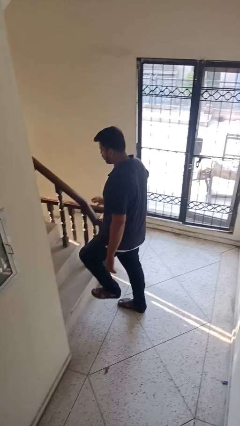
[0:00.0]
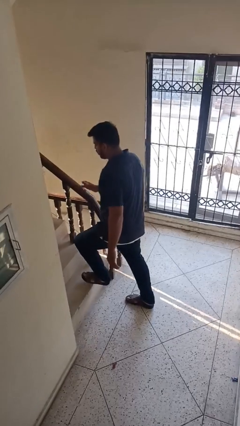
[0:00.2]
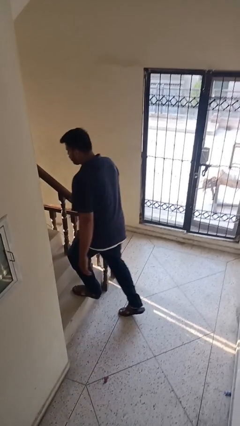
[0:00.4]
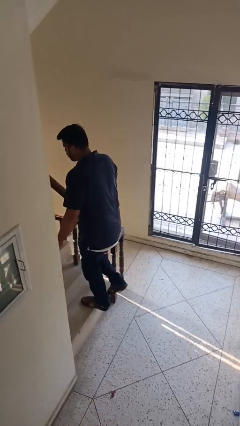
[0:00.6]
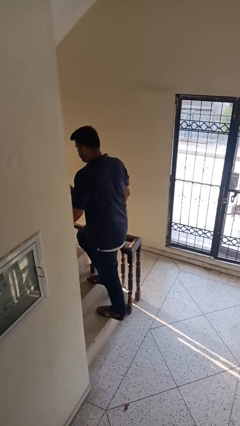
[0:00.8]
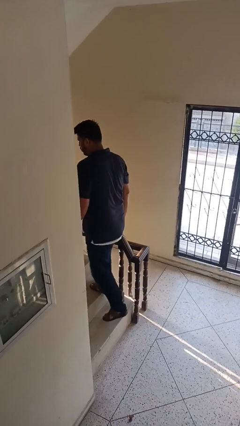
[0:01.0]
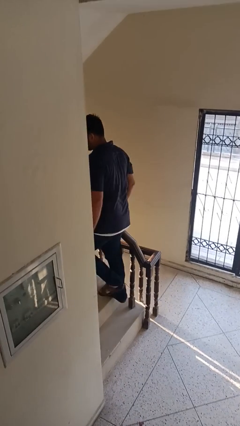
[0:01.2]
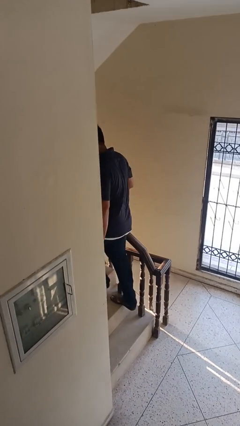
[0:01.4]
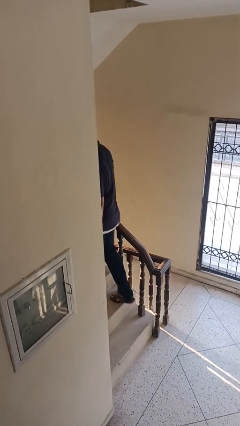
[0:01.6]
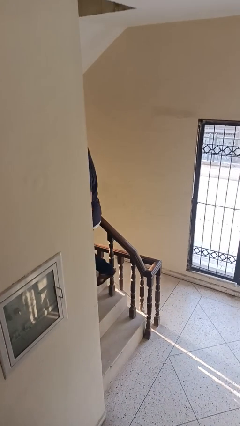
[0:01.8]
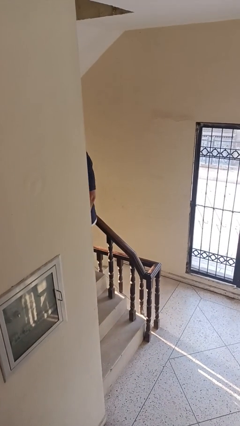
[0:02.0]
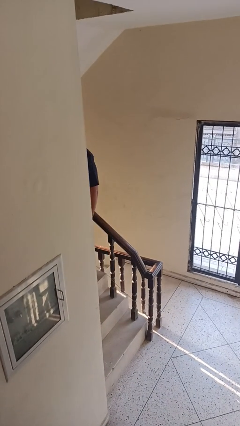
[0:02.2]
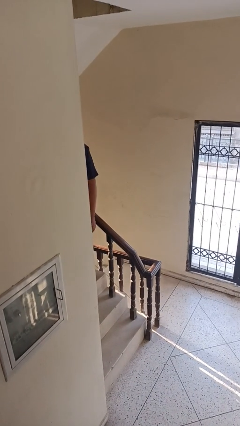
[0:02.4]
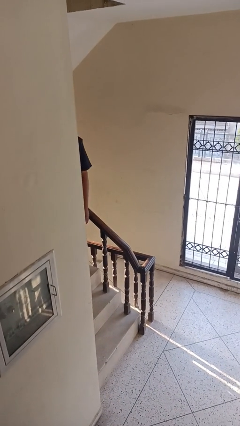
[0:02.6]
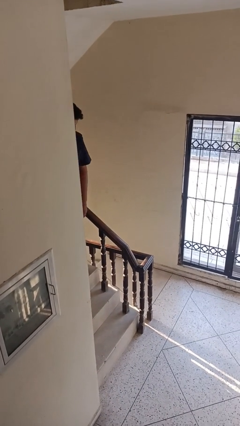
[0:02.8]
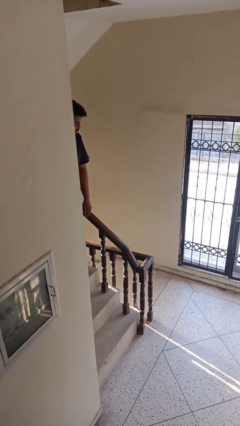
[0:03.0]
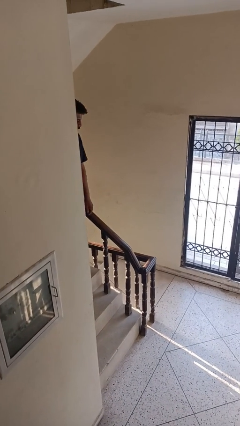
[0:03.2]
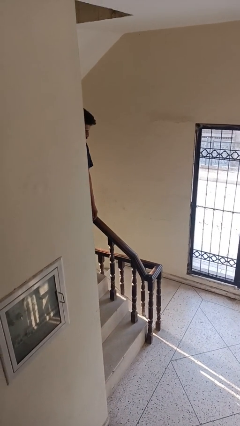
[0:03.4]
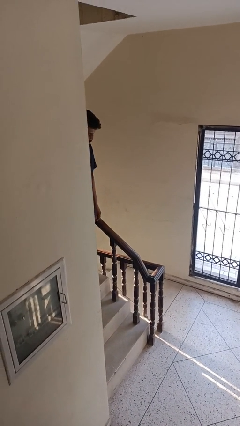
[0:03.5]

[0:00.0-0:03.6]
person climbs up stairs

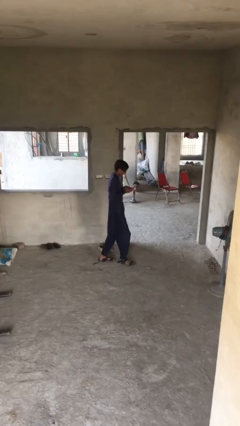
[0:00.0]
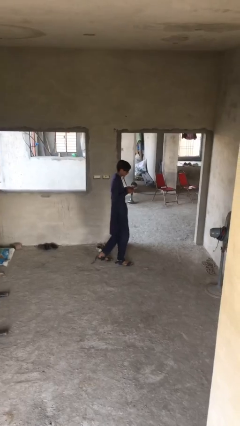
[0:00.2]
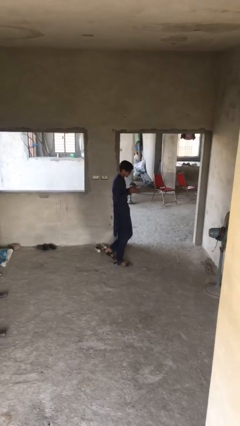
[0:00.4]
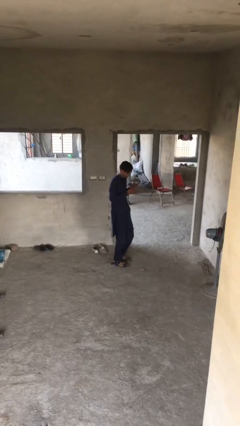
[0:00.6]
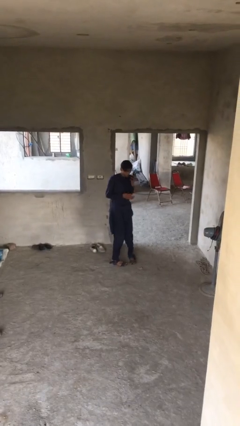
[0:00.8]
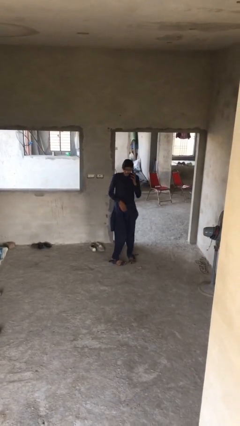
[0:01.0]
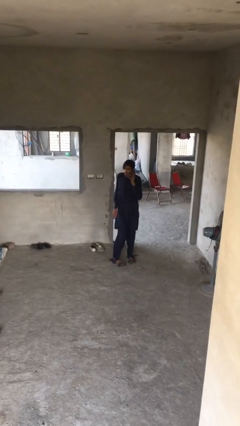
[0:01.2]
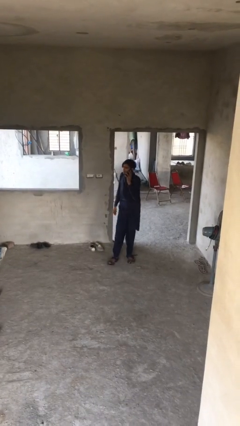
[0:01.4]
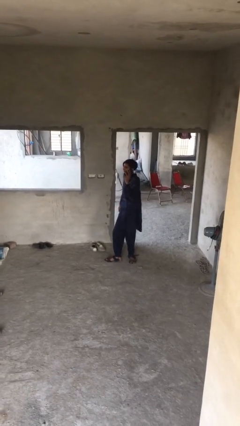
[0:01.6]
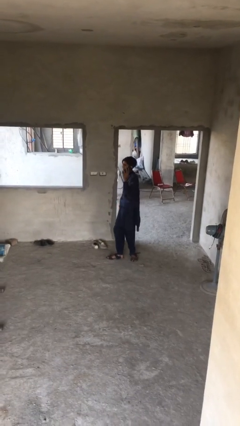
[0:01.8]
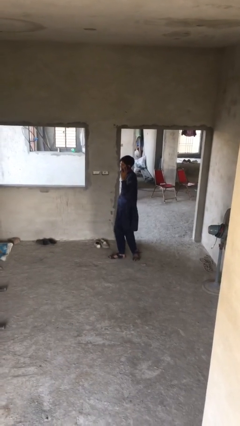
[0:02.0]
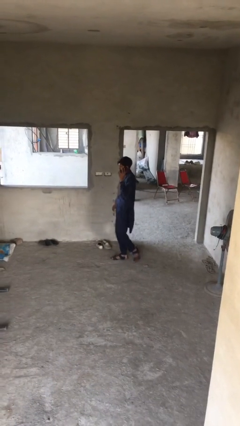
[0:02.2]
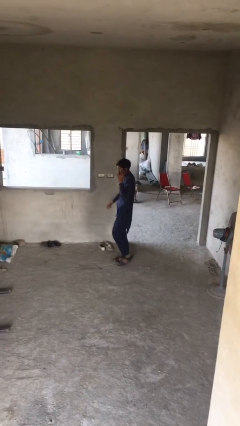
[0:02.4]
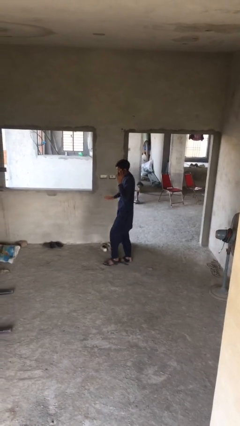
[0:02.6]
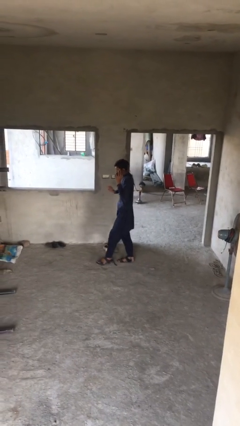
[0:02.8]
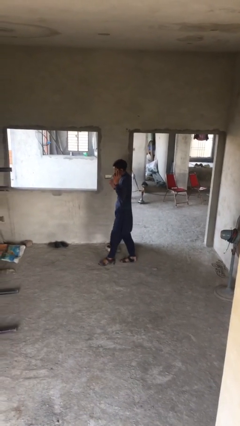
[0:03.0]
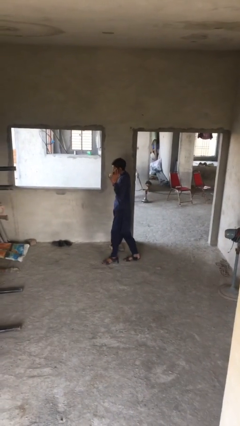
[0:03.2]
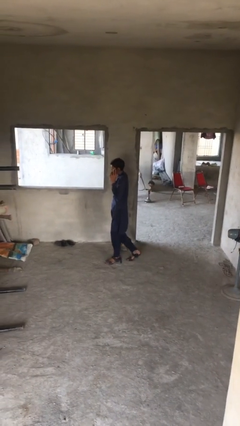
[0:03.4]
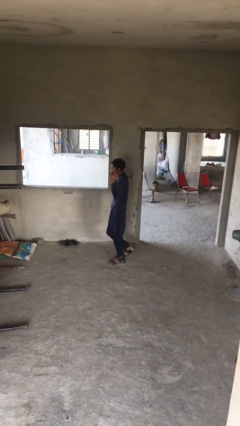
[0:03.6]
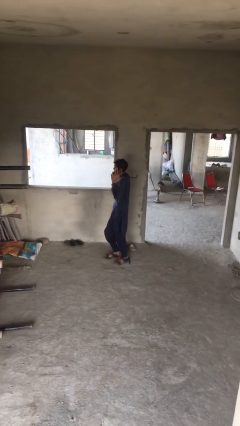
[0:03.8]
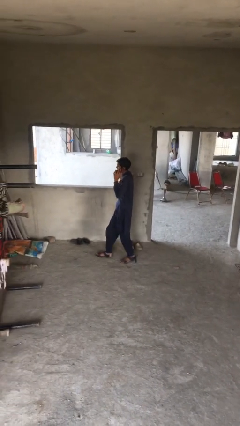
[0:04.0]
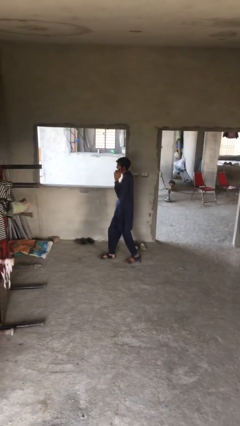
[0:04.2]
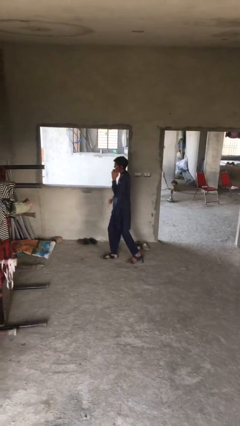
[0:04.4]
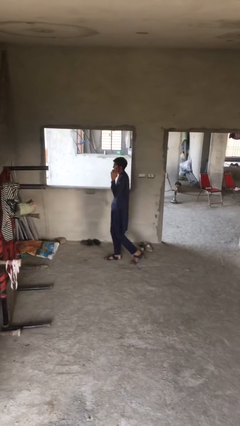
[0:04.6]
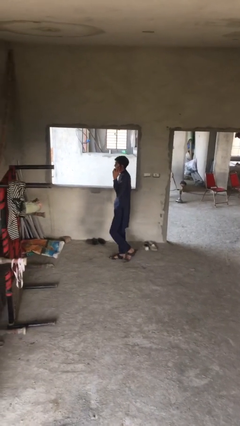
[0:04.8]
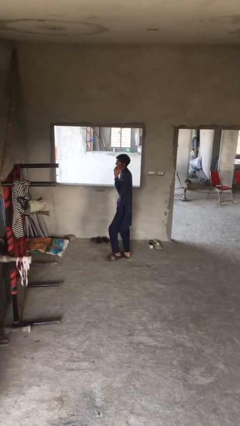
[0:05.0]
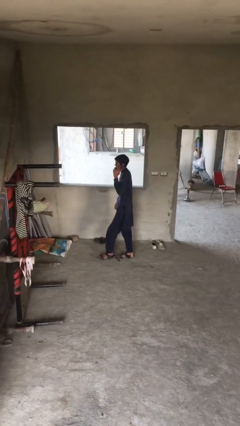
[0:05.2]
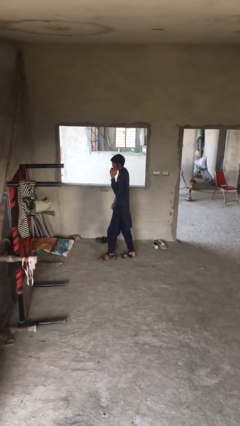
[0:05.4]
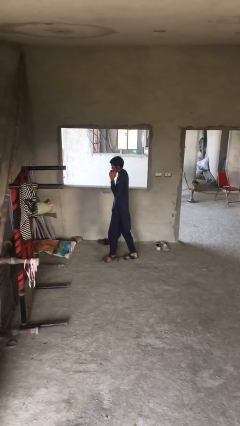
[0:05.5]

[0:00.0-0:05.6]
person talks on phone

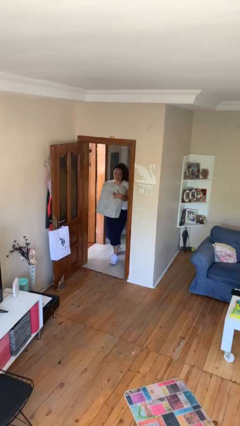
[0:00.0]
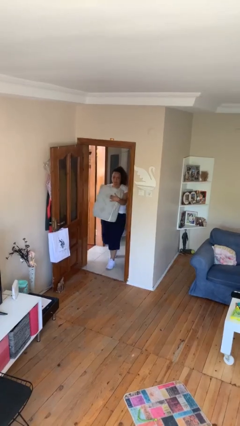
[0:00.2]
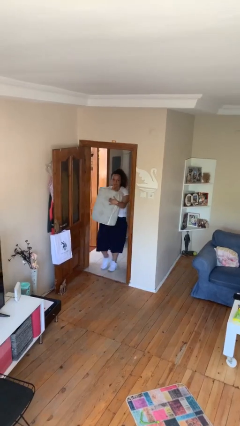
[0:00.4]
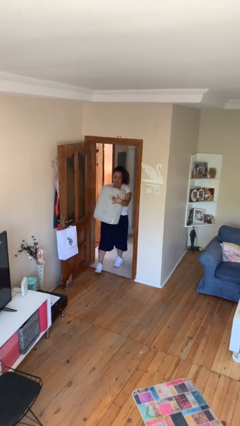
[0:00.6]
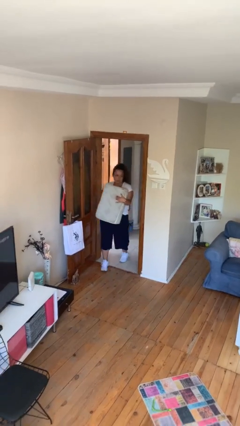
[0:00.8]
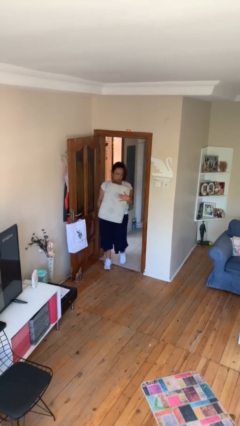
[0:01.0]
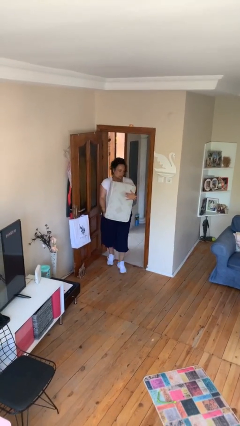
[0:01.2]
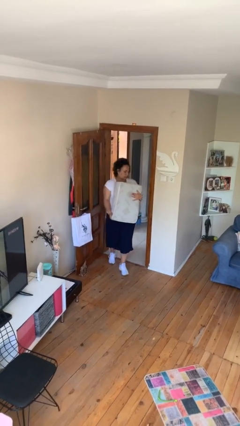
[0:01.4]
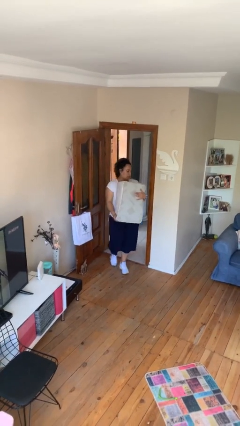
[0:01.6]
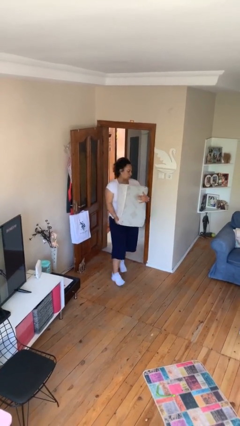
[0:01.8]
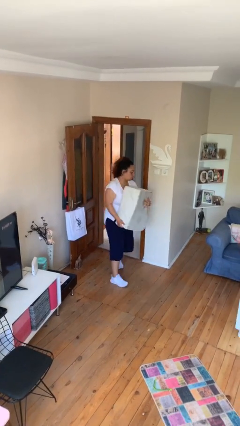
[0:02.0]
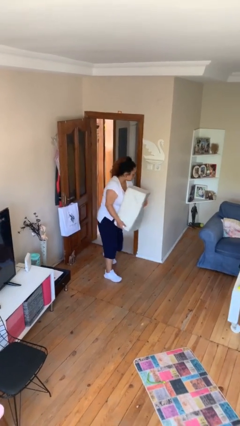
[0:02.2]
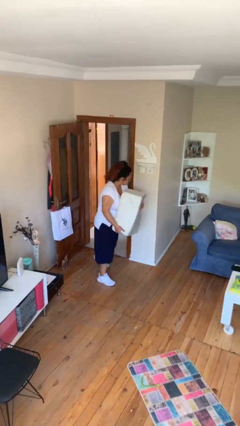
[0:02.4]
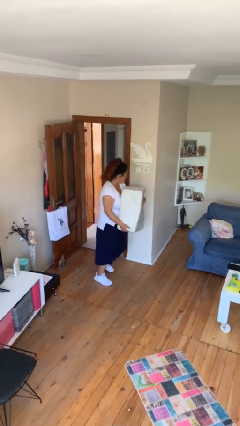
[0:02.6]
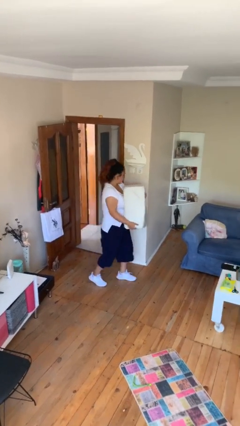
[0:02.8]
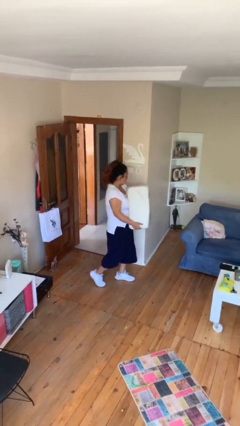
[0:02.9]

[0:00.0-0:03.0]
person carries heavy object

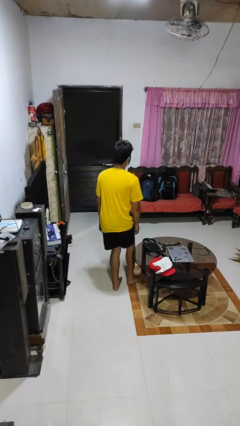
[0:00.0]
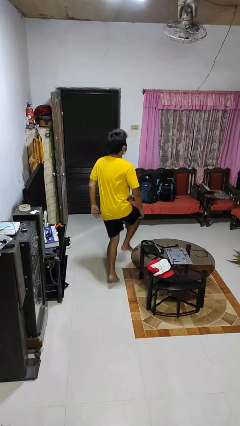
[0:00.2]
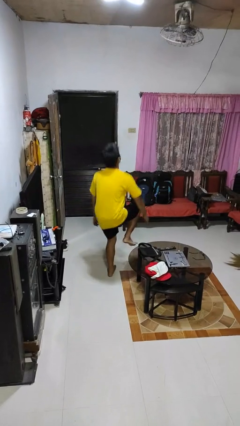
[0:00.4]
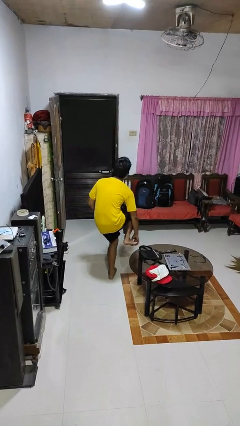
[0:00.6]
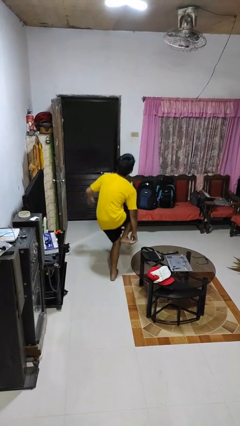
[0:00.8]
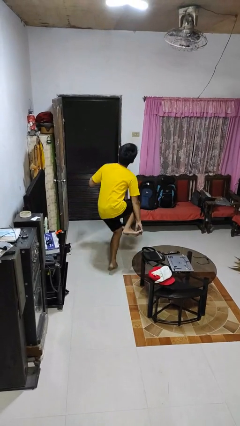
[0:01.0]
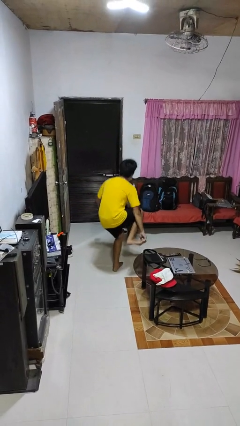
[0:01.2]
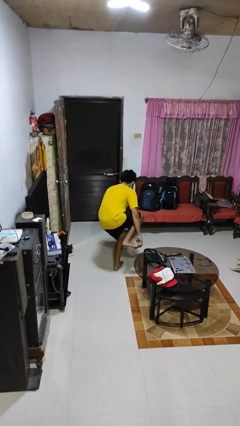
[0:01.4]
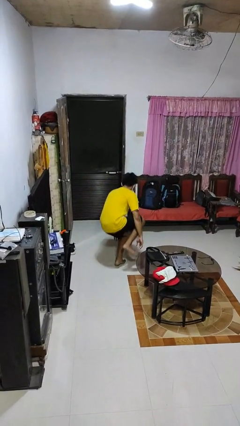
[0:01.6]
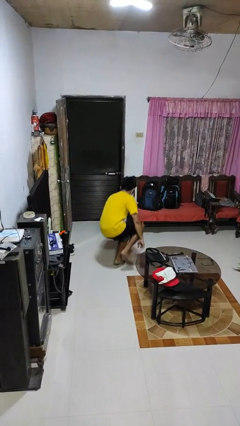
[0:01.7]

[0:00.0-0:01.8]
person trips on object on floor

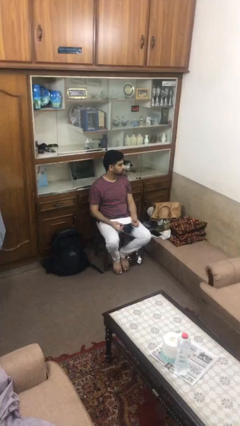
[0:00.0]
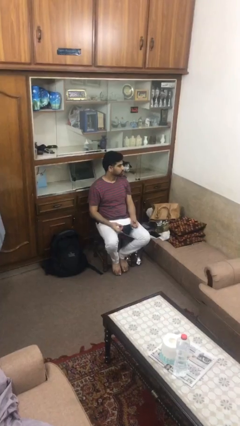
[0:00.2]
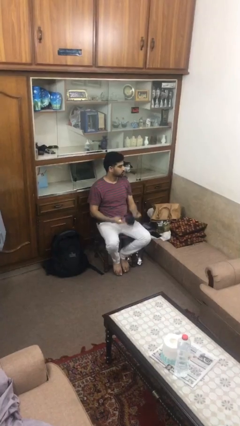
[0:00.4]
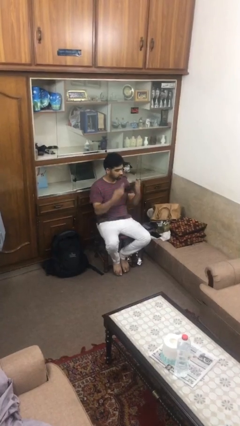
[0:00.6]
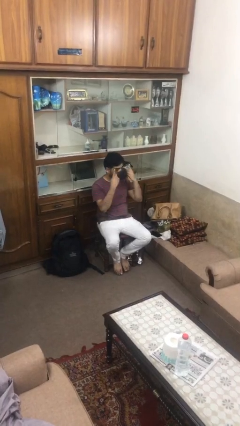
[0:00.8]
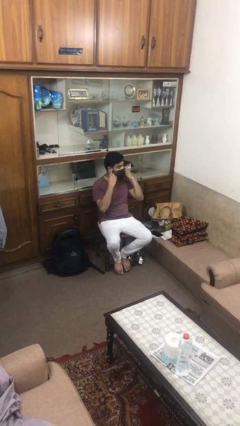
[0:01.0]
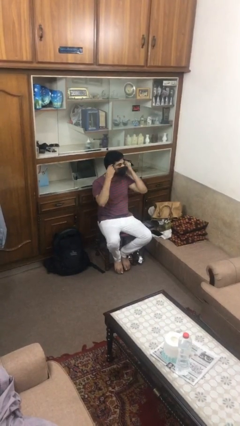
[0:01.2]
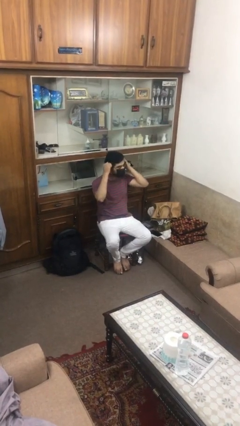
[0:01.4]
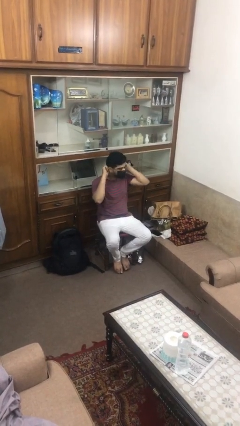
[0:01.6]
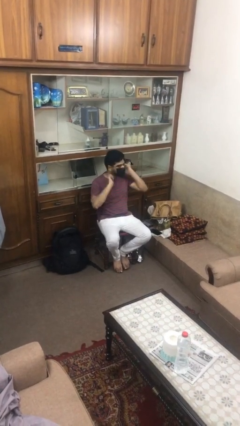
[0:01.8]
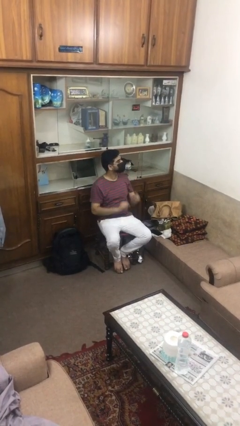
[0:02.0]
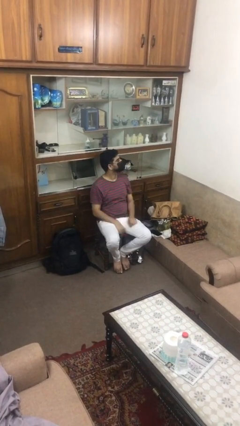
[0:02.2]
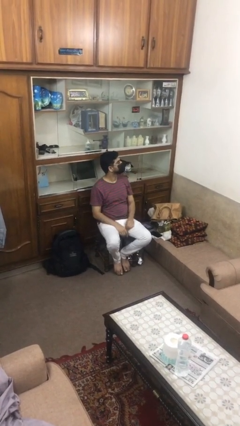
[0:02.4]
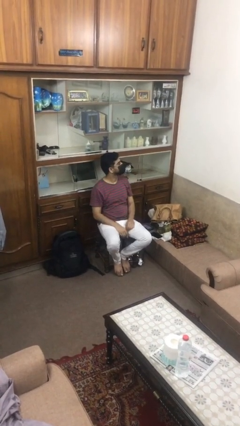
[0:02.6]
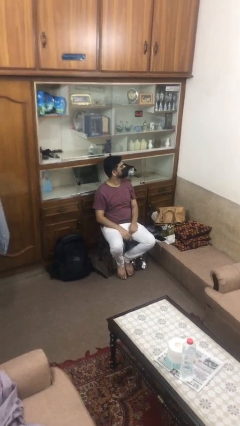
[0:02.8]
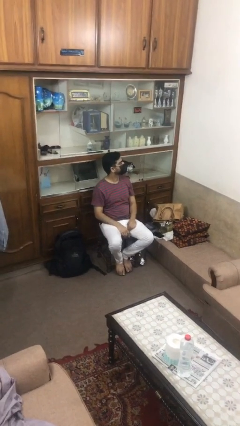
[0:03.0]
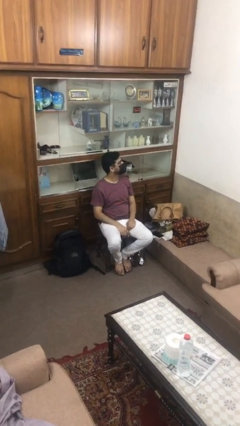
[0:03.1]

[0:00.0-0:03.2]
person puts on facemask

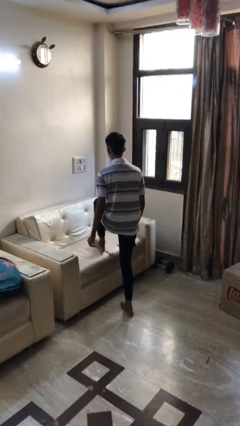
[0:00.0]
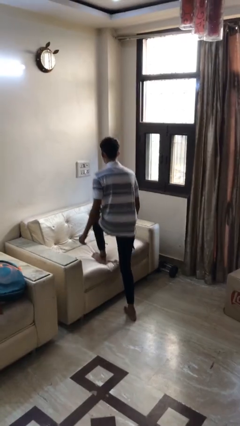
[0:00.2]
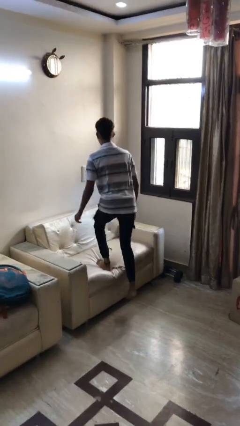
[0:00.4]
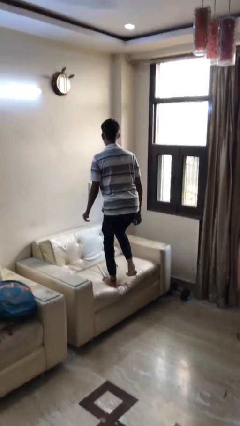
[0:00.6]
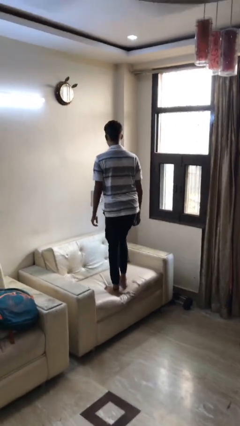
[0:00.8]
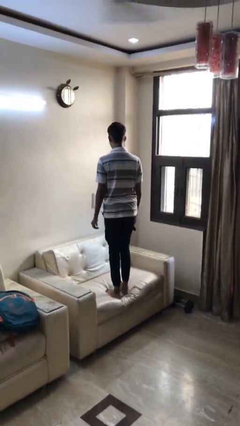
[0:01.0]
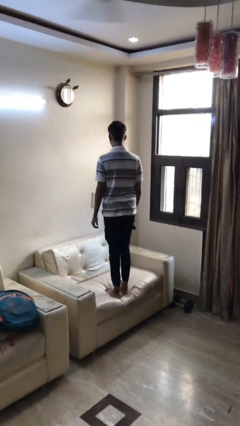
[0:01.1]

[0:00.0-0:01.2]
person climbs on couch
